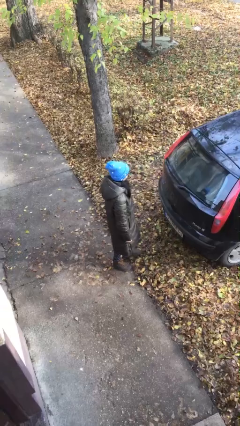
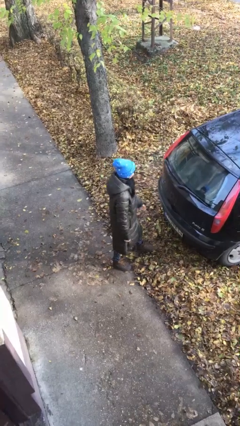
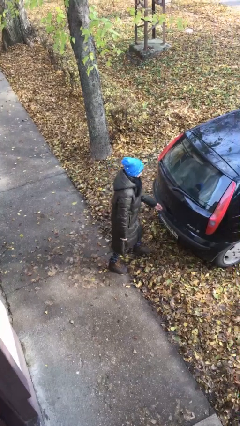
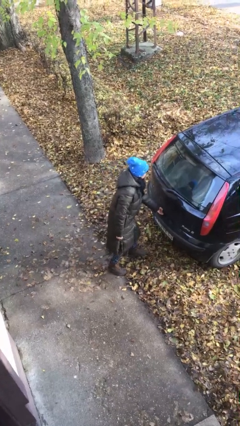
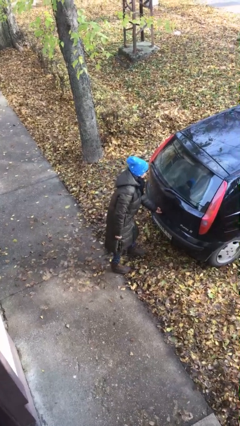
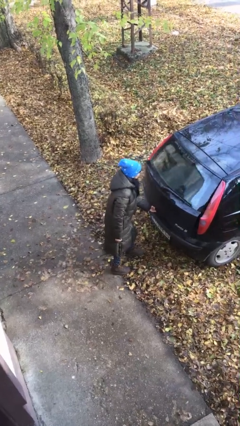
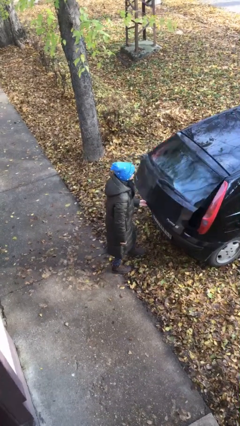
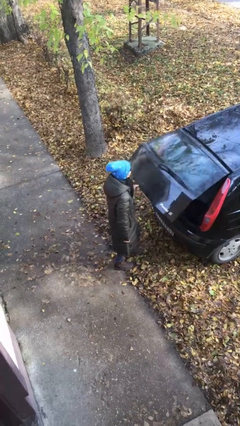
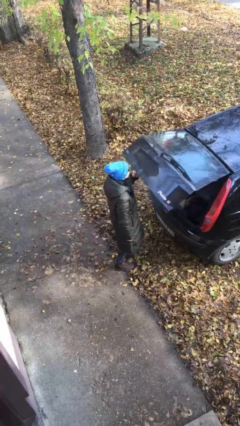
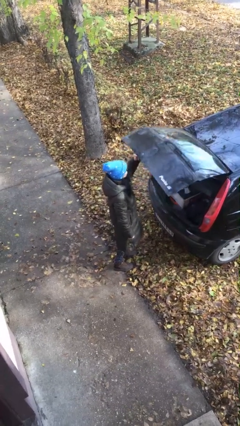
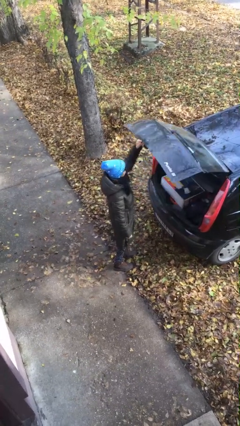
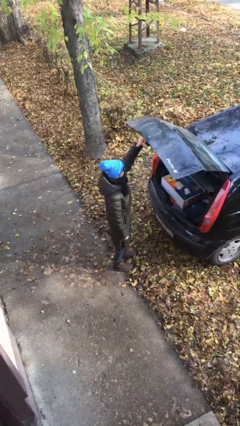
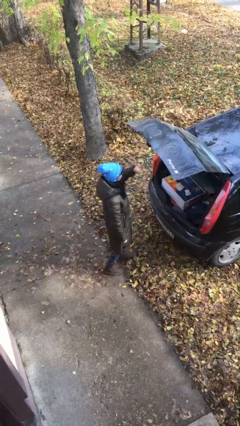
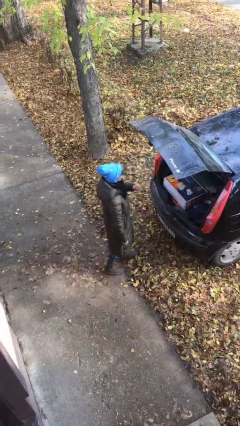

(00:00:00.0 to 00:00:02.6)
person opens car trunk

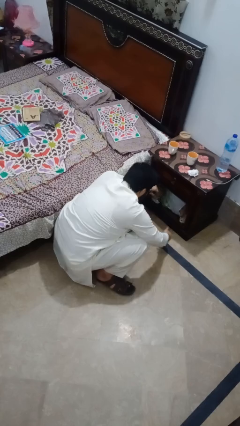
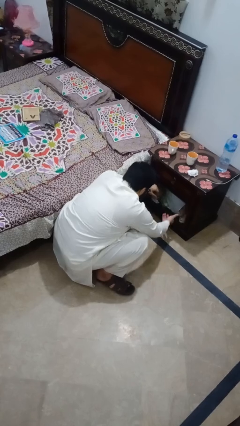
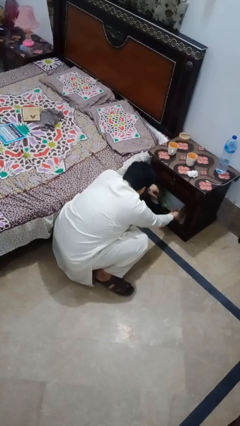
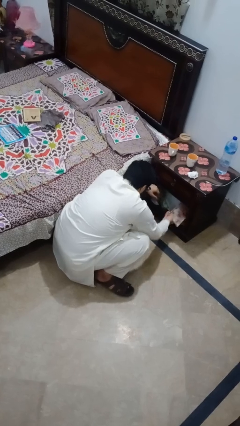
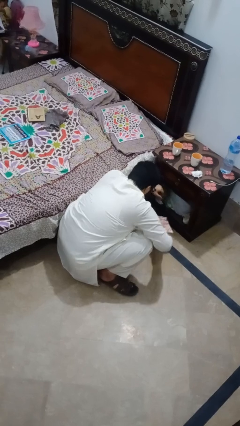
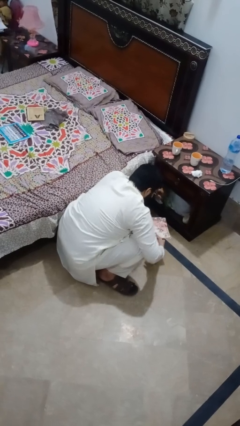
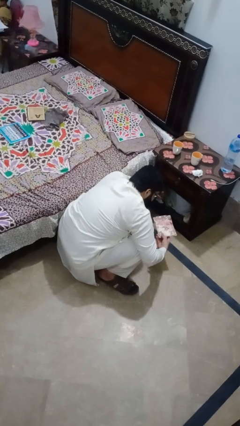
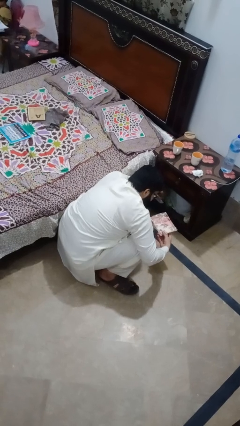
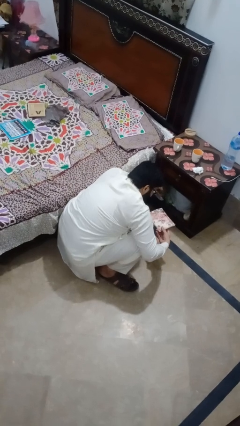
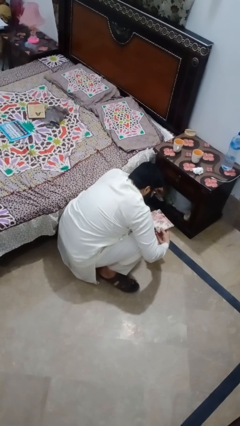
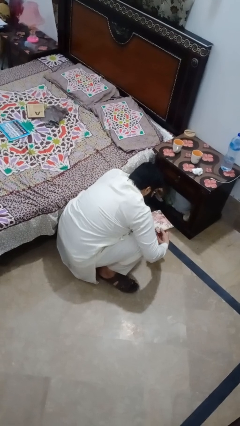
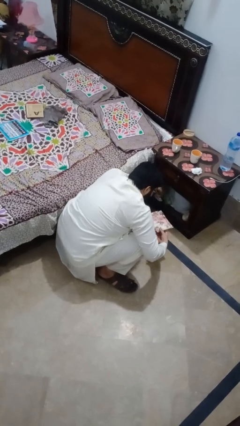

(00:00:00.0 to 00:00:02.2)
person picks up object from cabinet

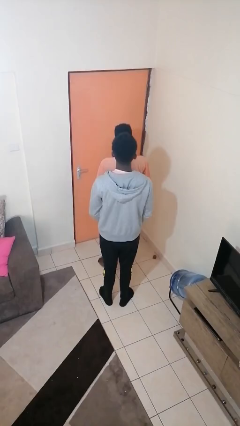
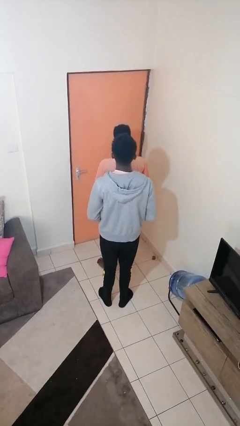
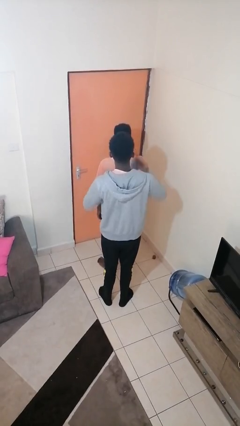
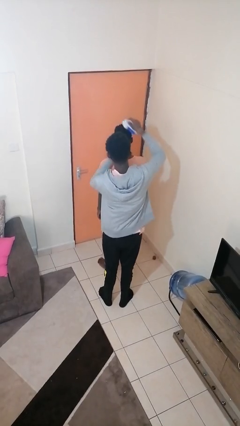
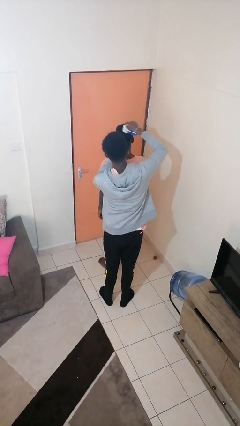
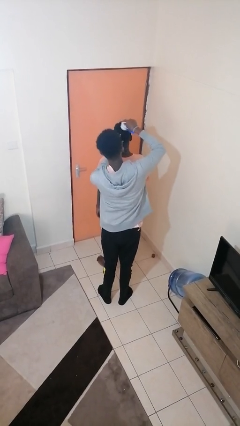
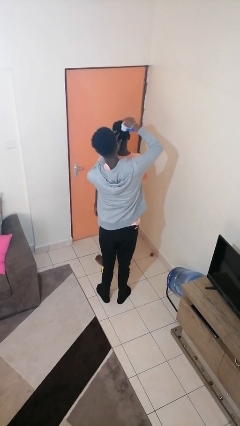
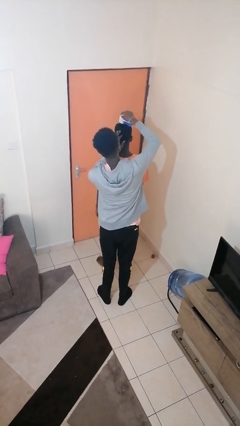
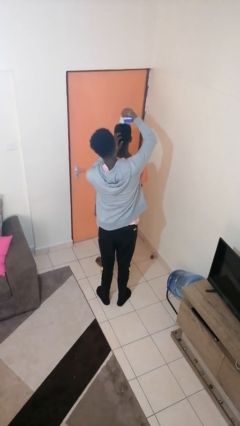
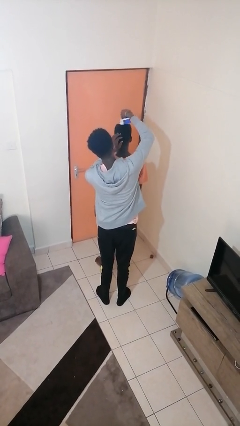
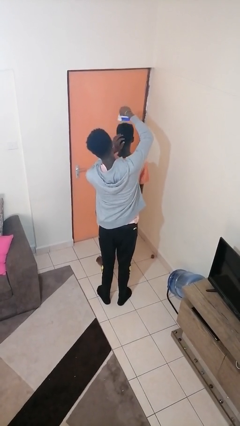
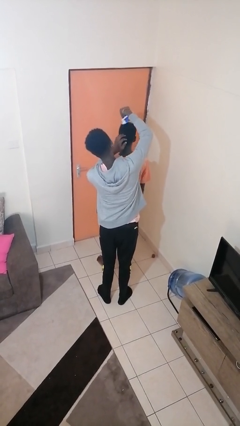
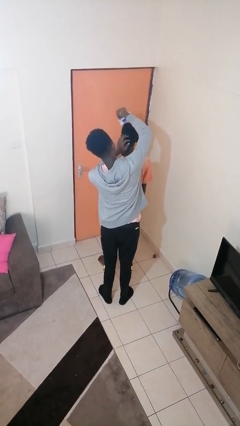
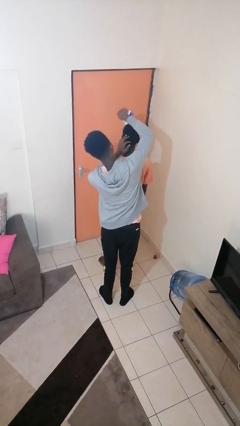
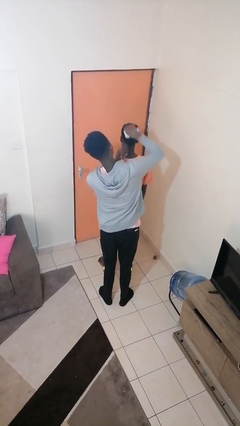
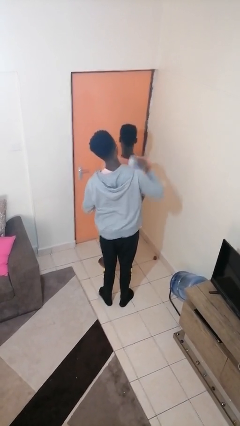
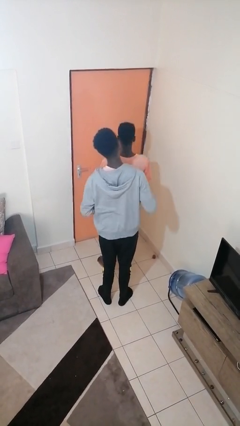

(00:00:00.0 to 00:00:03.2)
person brushes hair of person

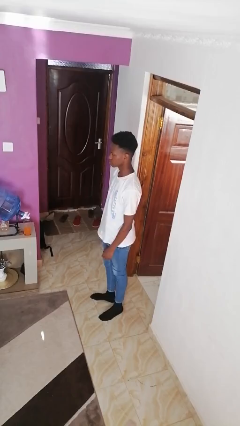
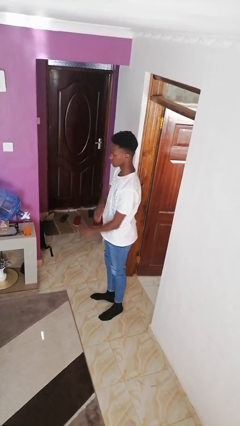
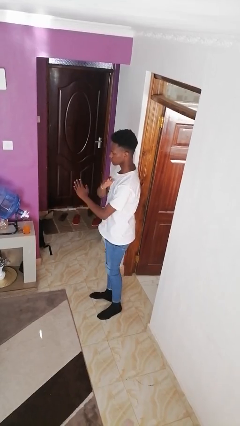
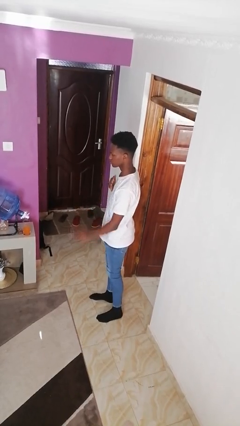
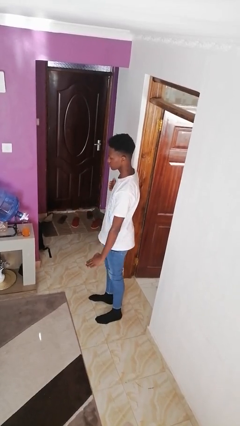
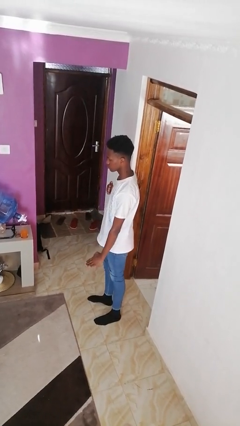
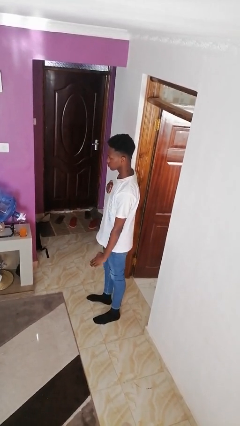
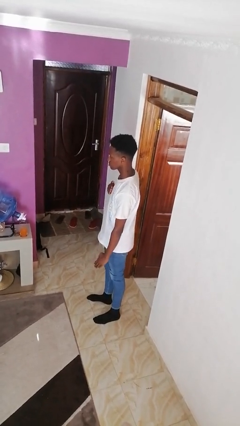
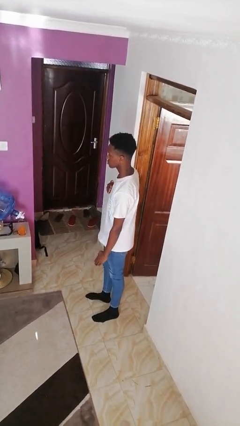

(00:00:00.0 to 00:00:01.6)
person karate chop

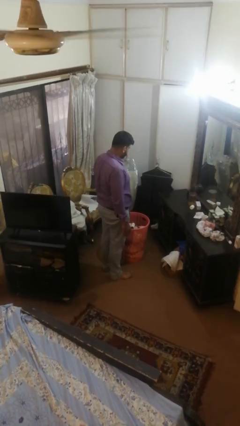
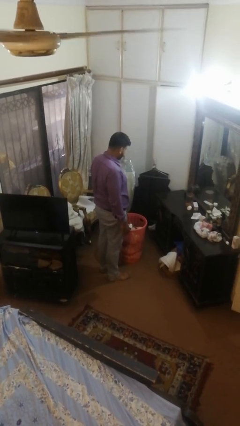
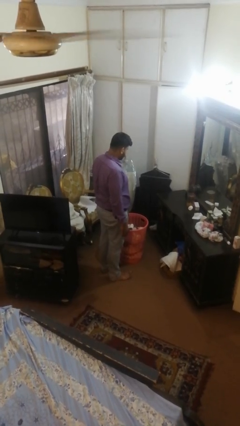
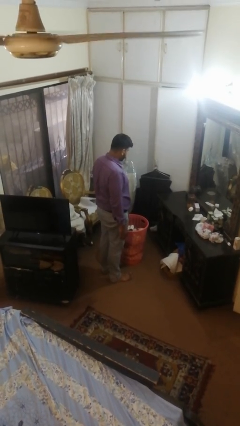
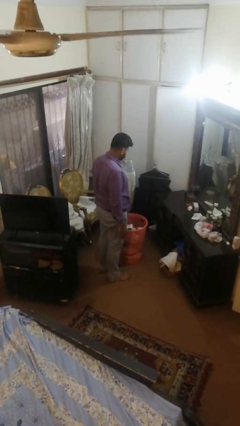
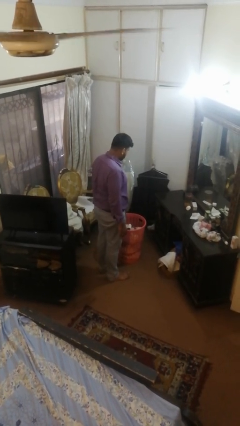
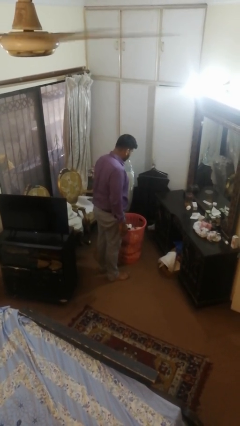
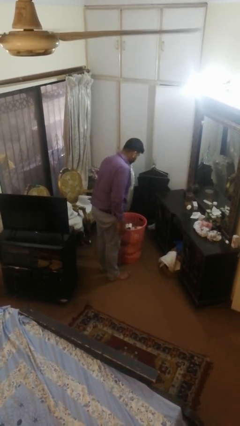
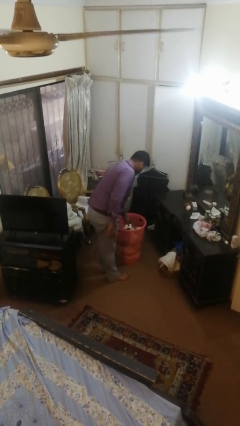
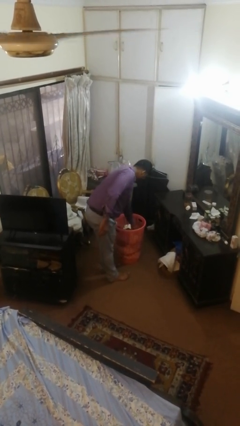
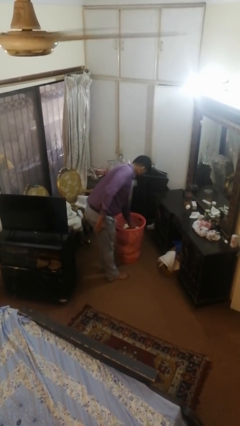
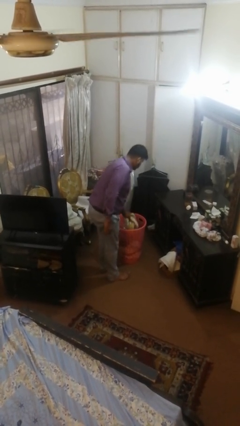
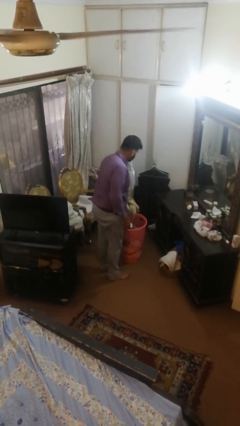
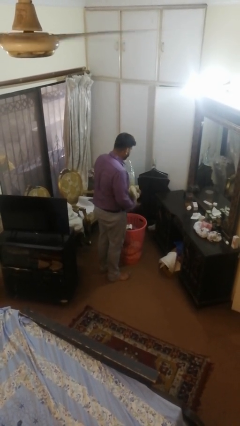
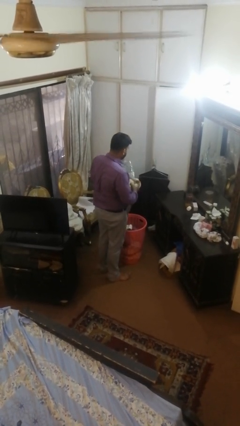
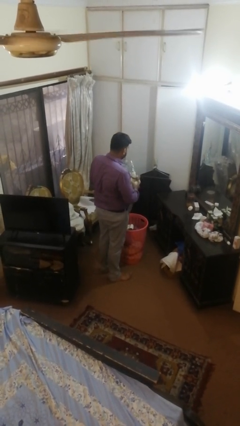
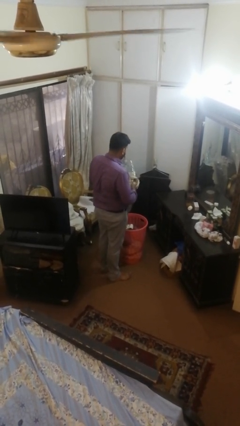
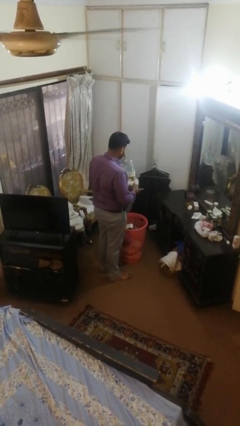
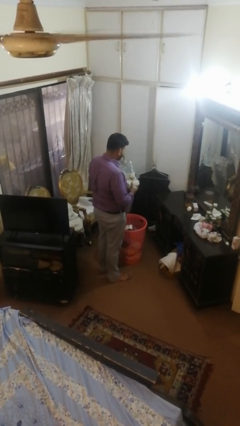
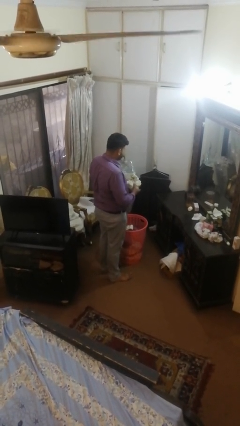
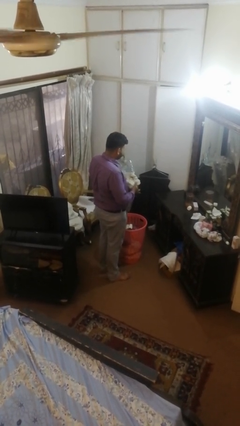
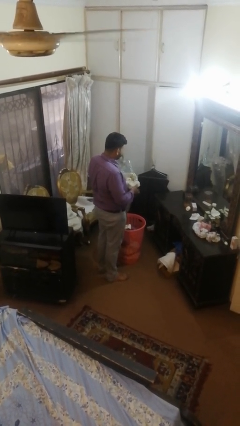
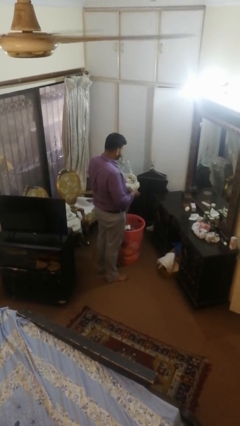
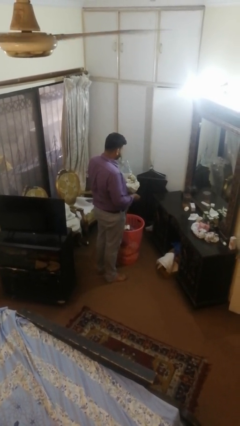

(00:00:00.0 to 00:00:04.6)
person takes object from basket

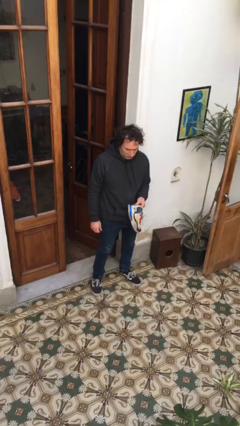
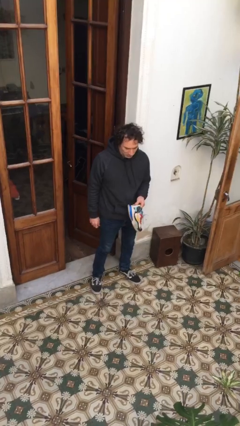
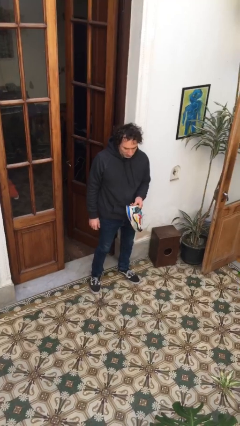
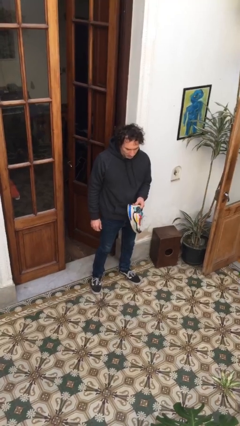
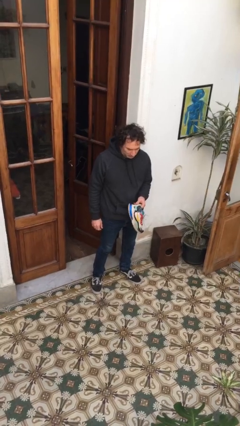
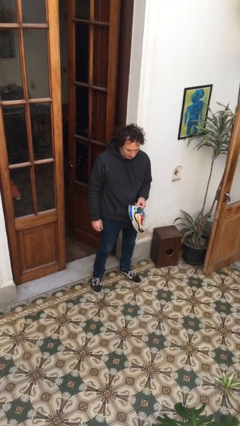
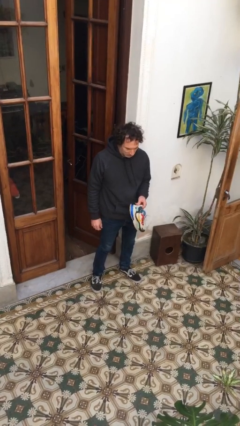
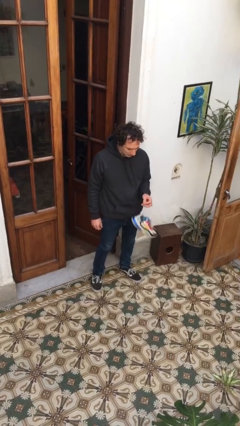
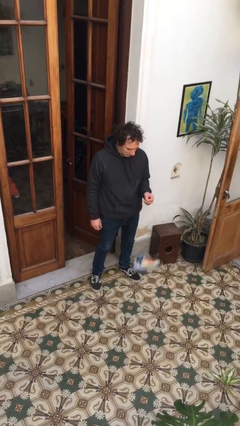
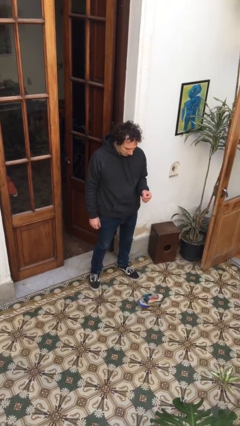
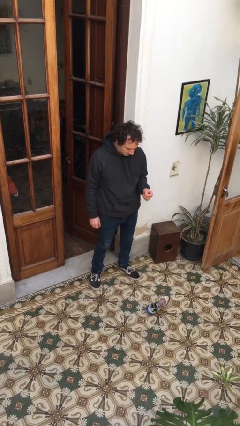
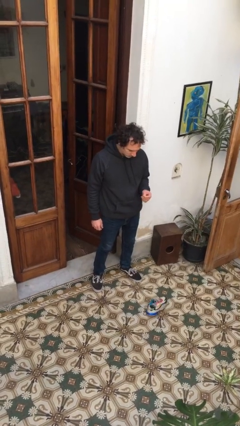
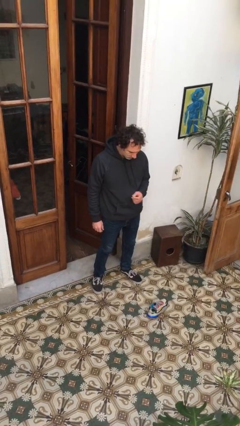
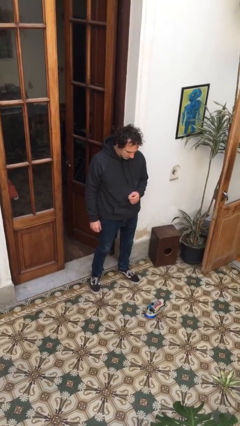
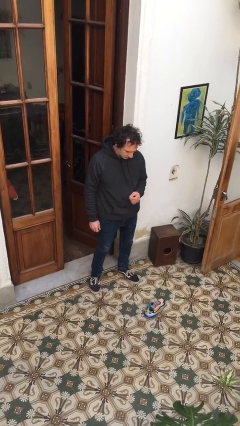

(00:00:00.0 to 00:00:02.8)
person drops object
